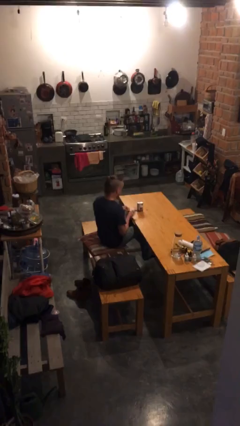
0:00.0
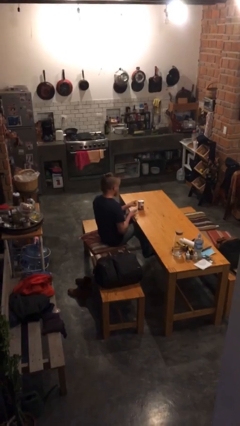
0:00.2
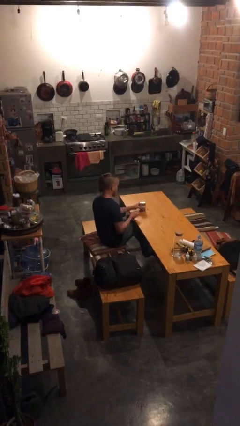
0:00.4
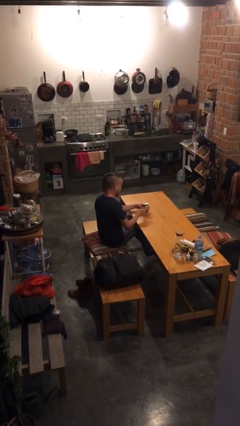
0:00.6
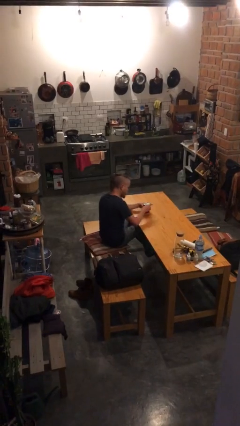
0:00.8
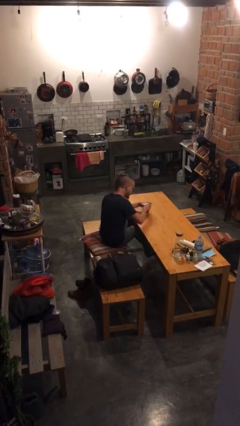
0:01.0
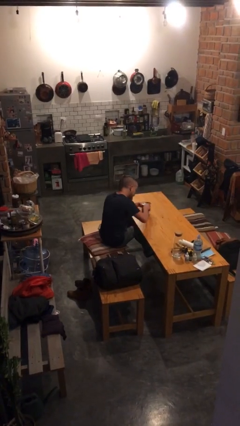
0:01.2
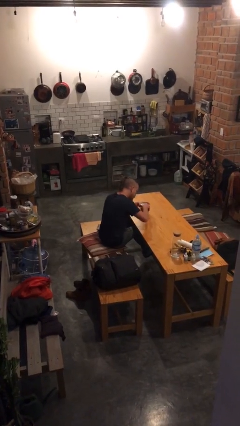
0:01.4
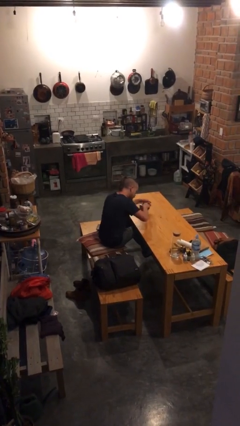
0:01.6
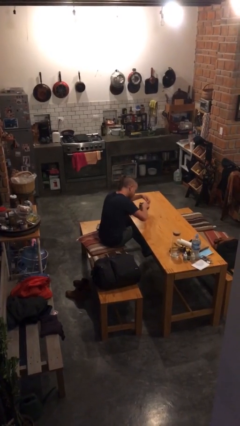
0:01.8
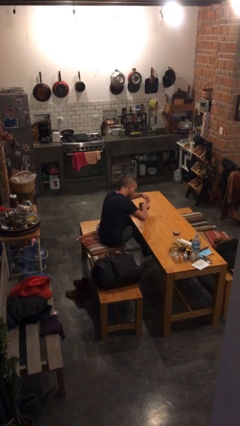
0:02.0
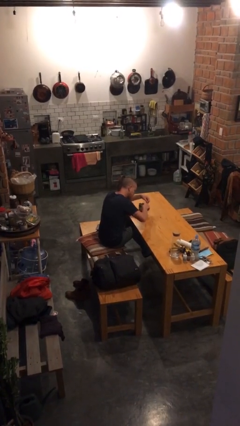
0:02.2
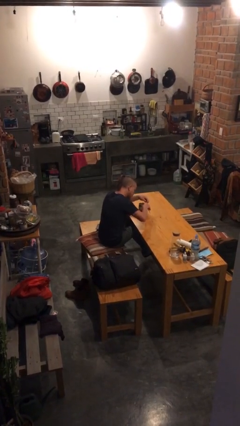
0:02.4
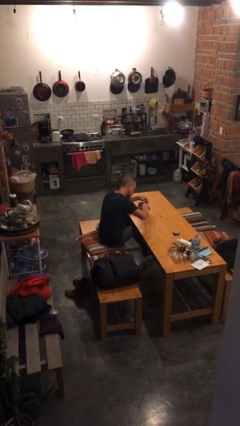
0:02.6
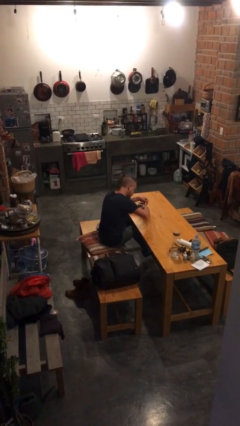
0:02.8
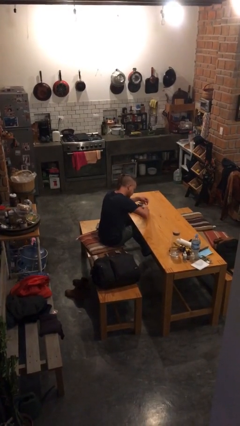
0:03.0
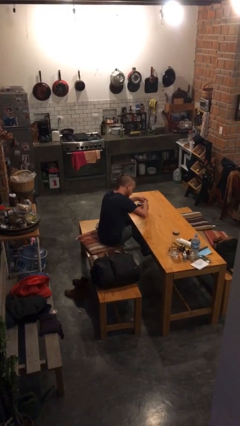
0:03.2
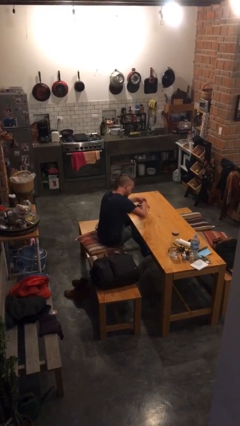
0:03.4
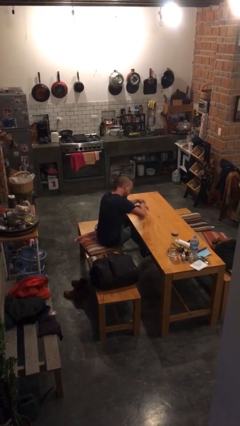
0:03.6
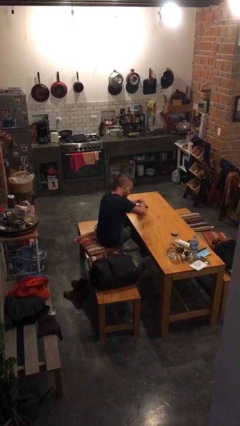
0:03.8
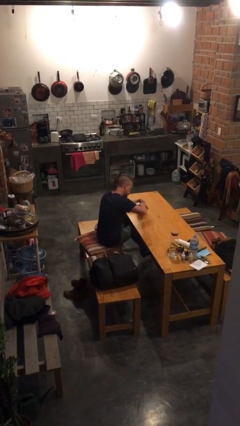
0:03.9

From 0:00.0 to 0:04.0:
person opens can with can opener

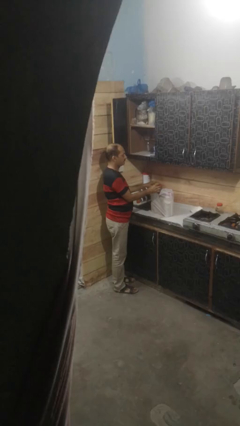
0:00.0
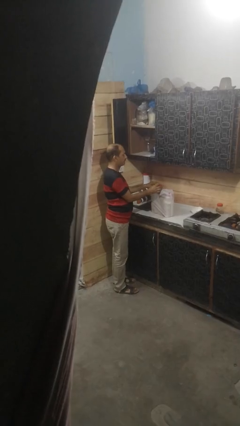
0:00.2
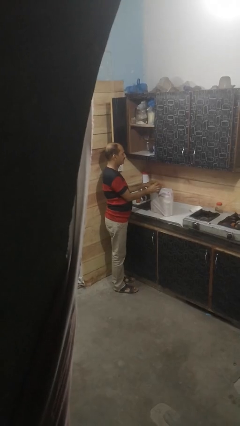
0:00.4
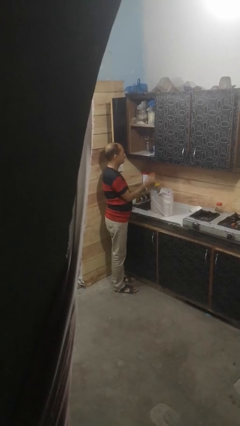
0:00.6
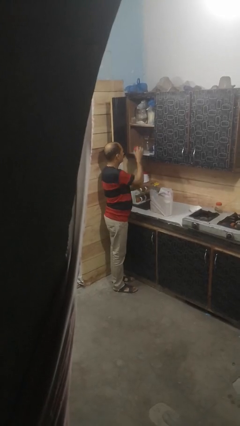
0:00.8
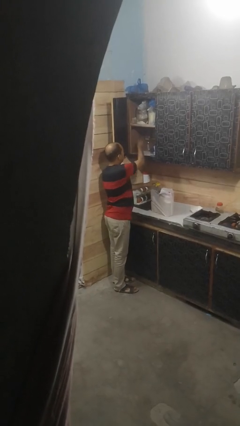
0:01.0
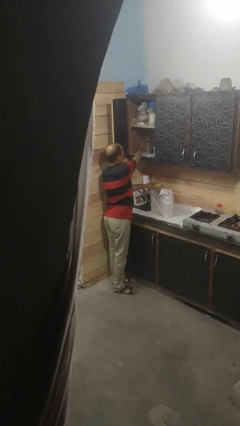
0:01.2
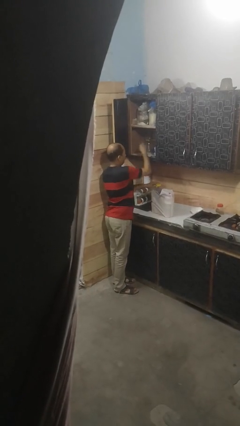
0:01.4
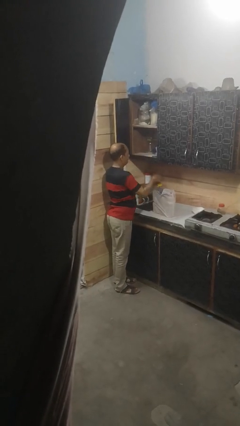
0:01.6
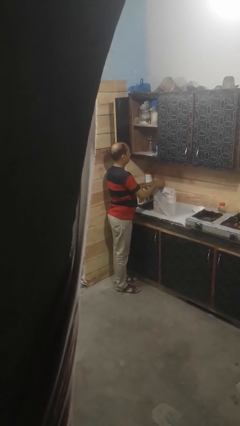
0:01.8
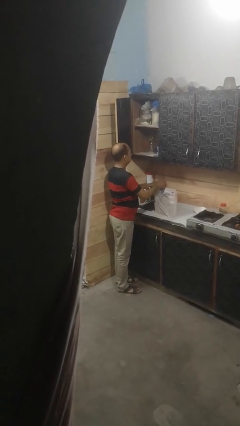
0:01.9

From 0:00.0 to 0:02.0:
person loads groceries into cabinet

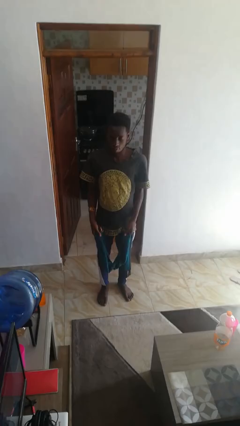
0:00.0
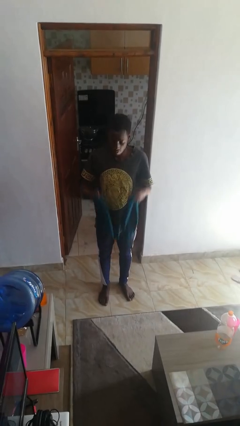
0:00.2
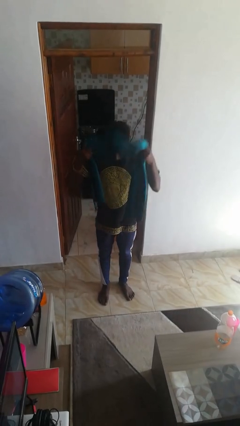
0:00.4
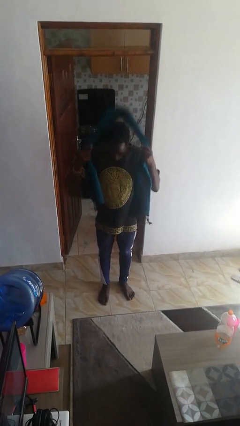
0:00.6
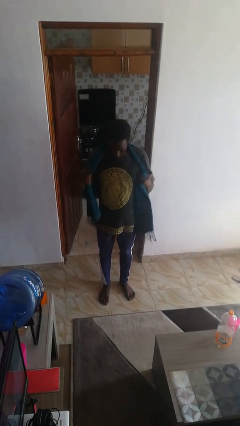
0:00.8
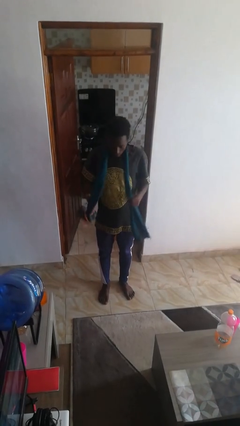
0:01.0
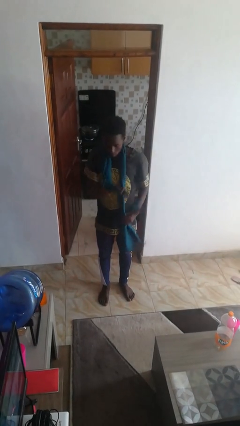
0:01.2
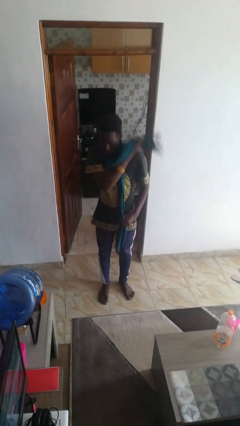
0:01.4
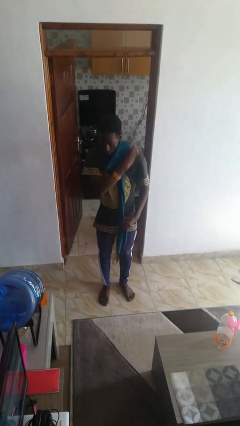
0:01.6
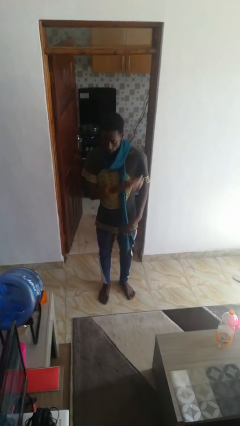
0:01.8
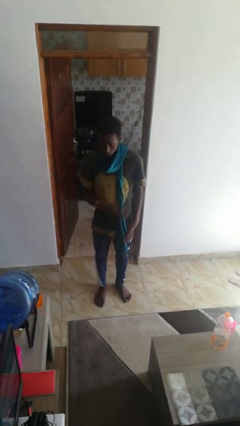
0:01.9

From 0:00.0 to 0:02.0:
person puts on scarf

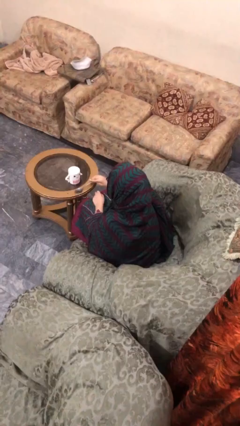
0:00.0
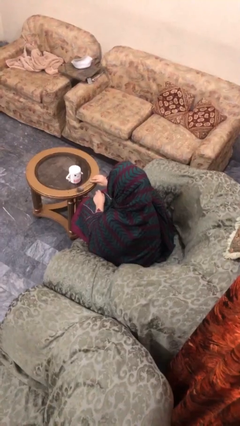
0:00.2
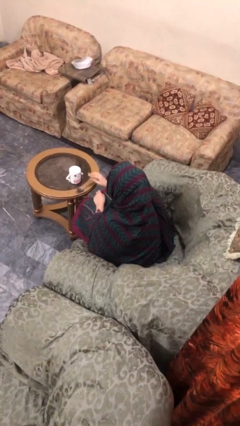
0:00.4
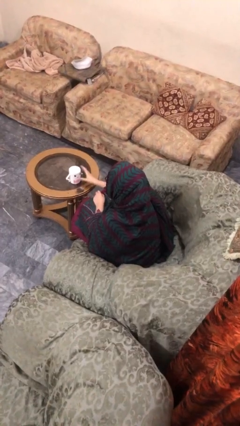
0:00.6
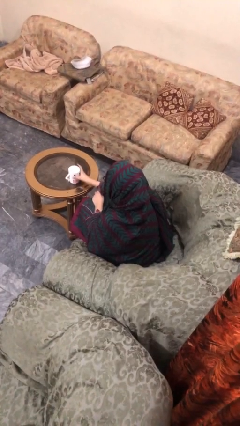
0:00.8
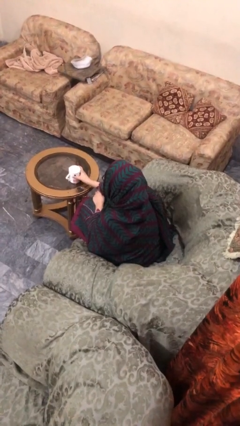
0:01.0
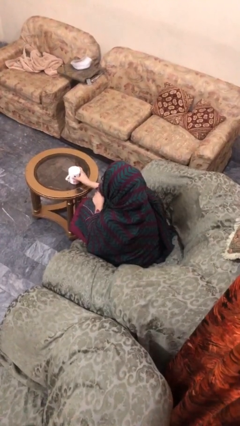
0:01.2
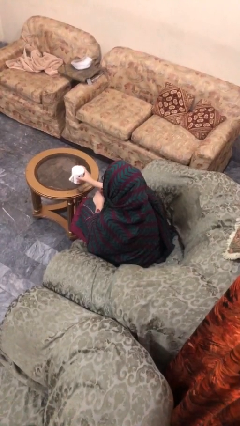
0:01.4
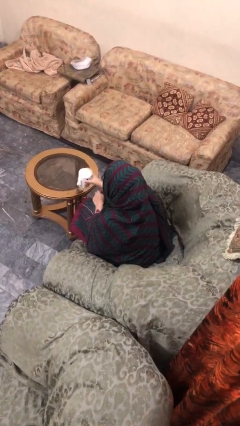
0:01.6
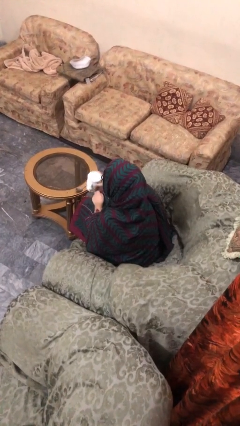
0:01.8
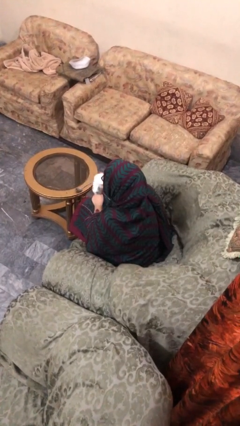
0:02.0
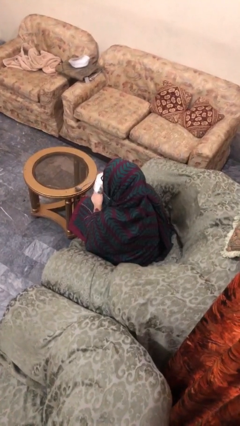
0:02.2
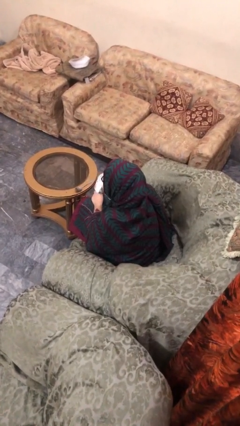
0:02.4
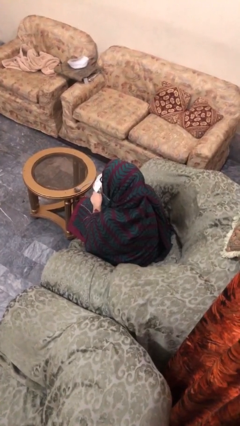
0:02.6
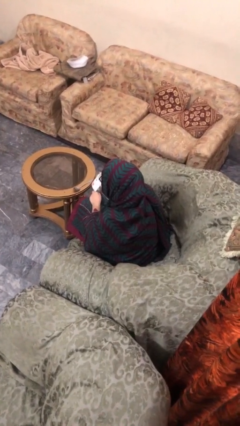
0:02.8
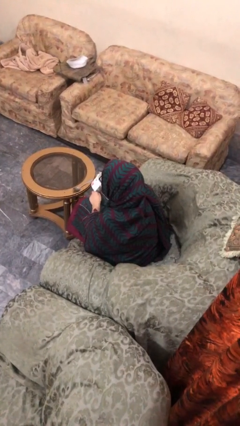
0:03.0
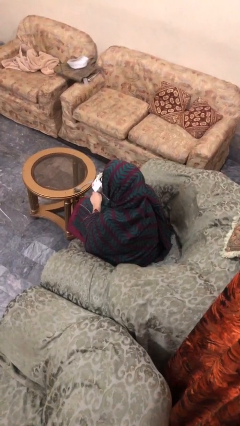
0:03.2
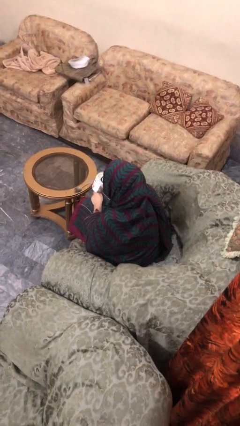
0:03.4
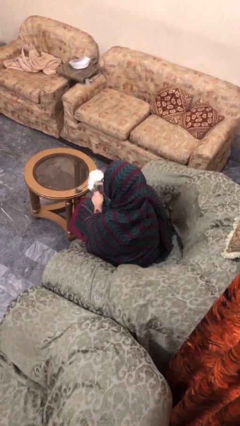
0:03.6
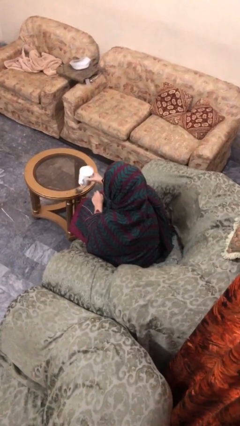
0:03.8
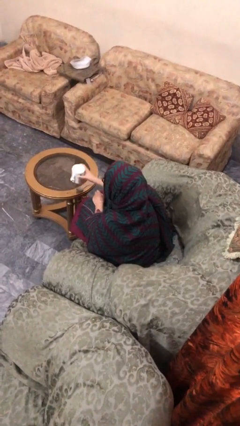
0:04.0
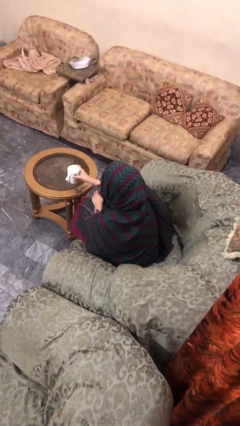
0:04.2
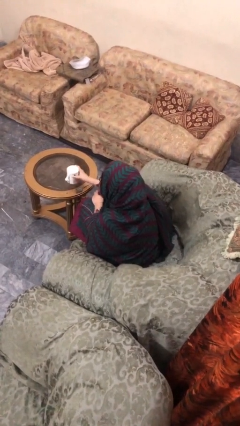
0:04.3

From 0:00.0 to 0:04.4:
person drinks from mug

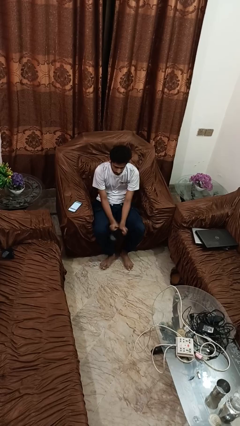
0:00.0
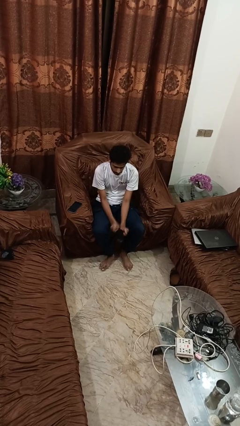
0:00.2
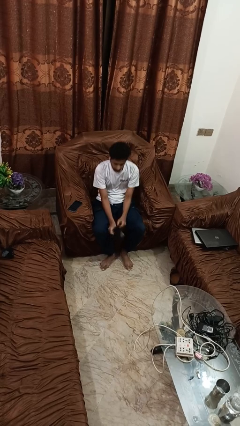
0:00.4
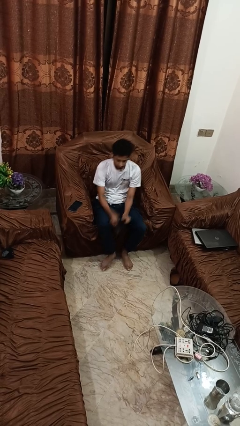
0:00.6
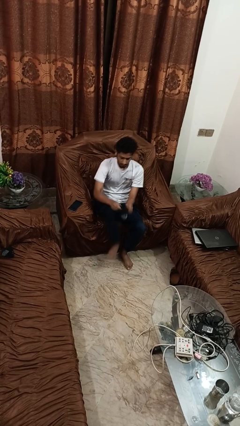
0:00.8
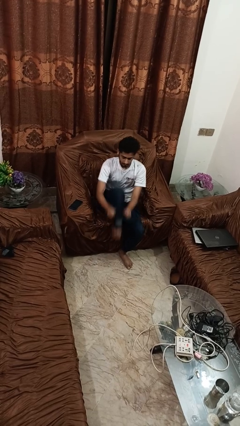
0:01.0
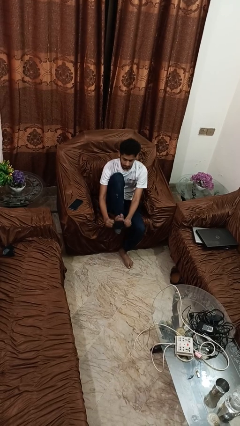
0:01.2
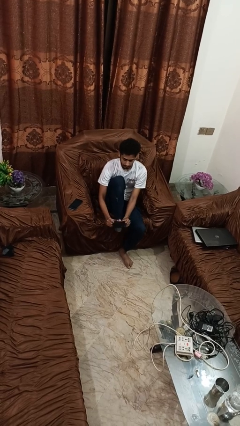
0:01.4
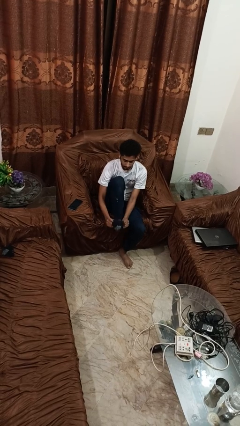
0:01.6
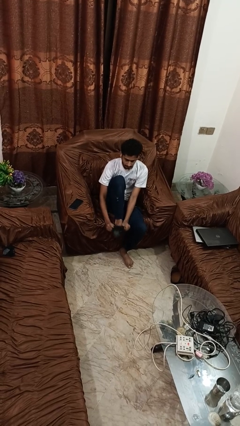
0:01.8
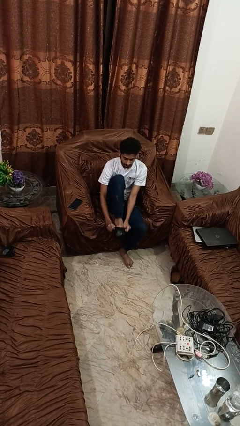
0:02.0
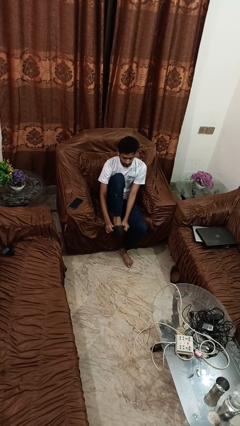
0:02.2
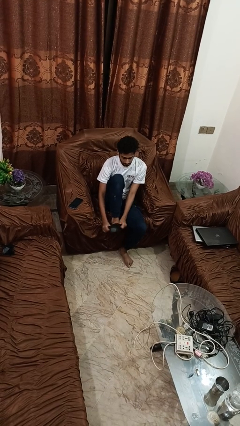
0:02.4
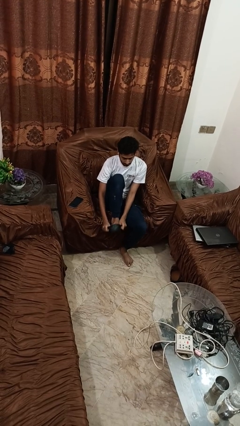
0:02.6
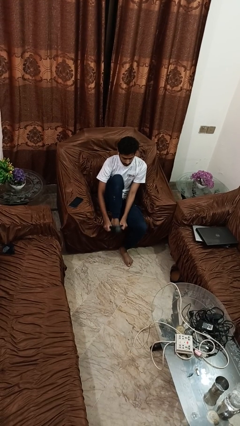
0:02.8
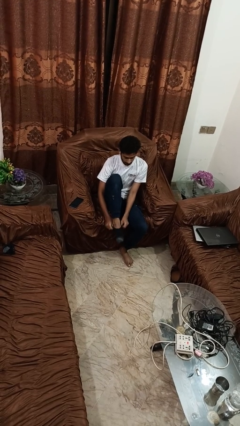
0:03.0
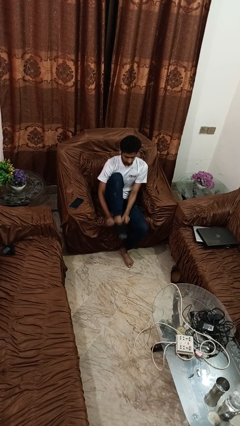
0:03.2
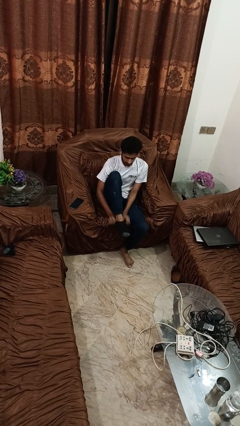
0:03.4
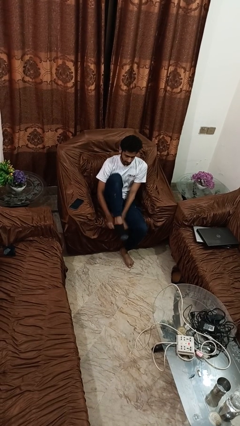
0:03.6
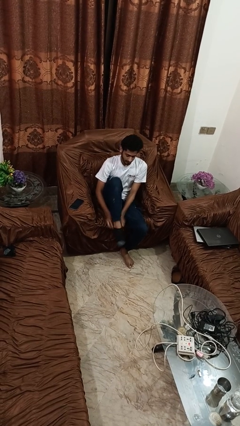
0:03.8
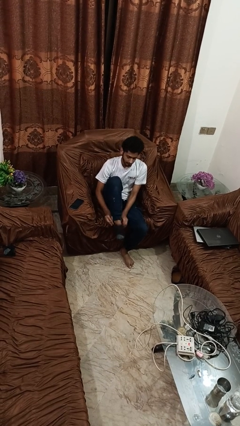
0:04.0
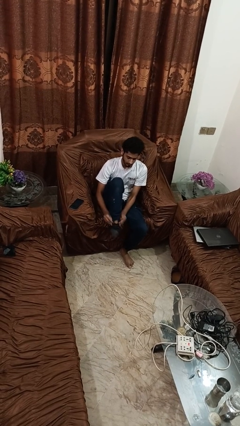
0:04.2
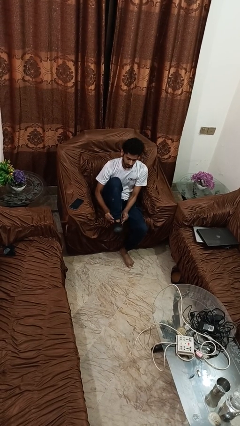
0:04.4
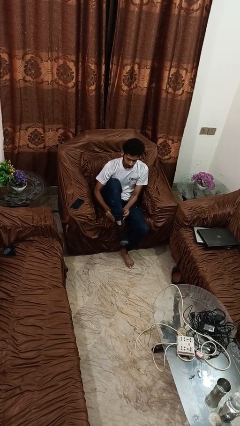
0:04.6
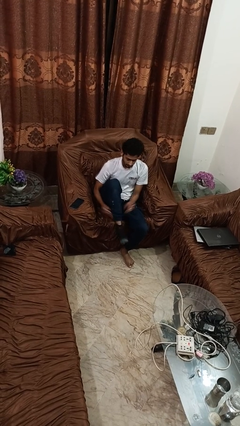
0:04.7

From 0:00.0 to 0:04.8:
person puts on socks

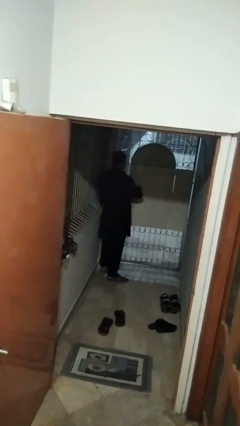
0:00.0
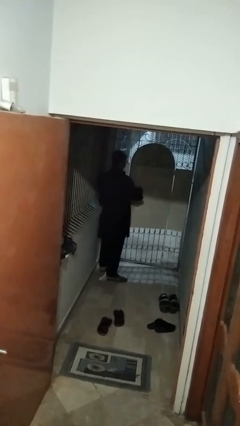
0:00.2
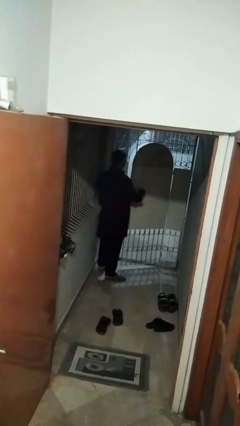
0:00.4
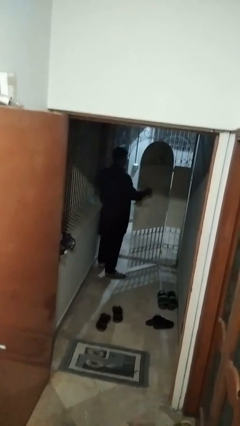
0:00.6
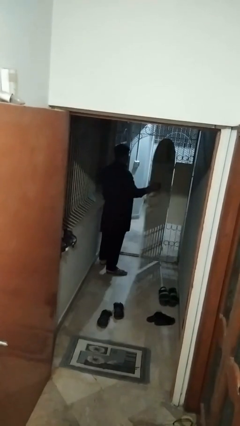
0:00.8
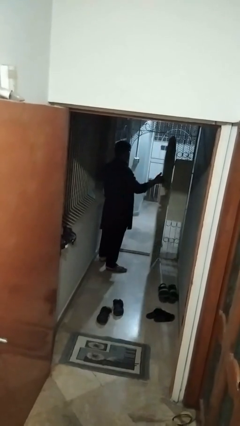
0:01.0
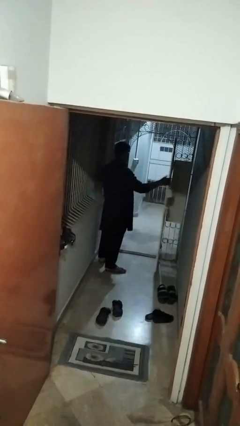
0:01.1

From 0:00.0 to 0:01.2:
person opens gate
